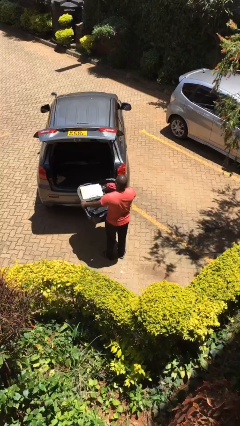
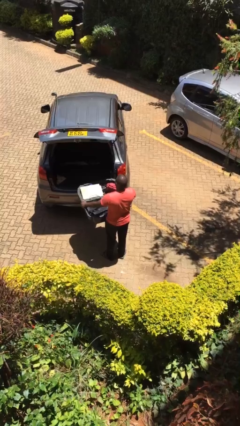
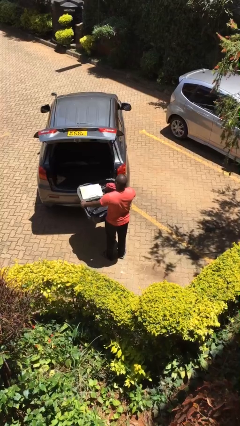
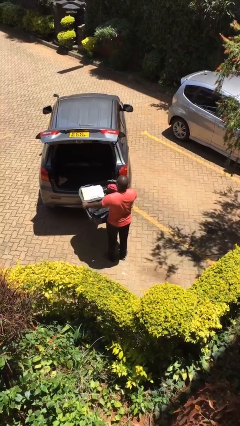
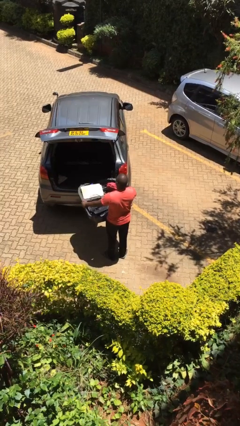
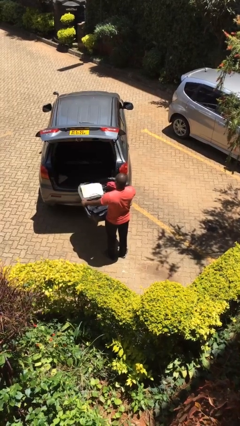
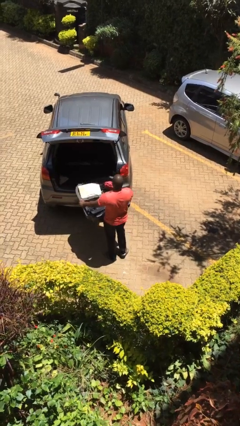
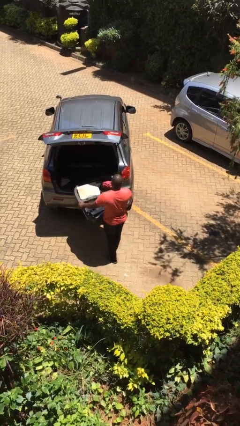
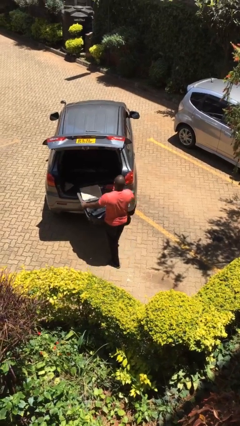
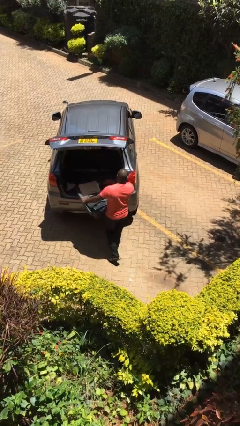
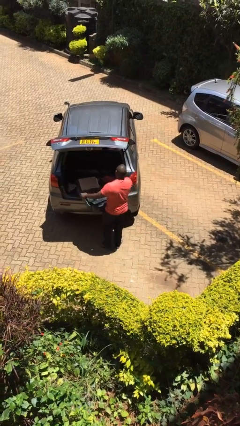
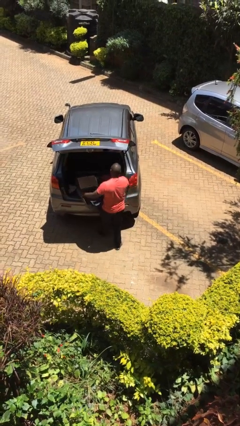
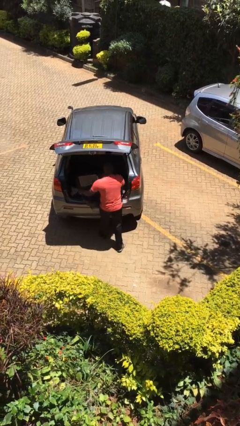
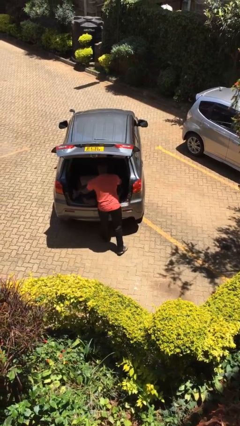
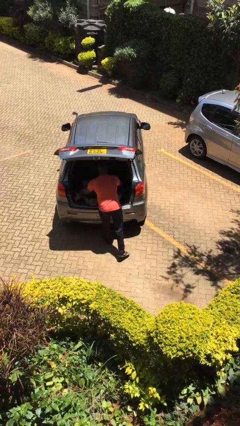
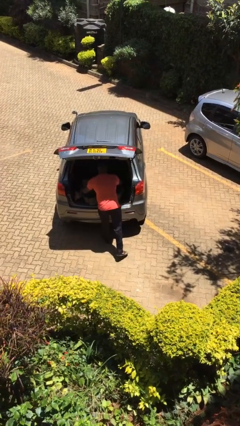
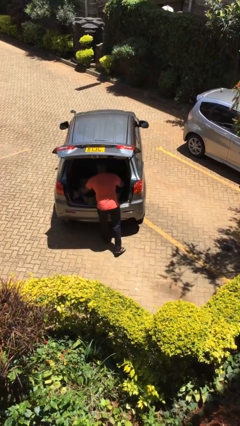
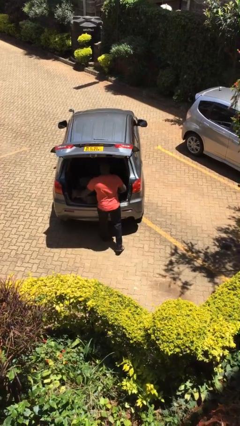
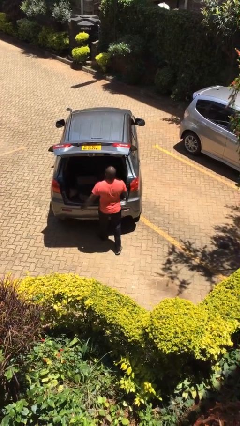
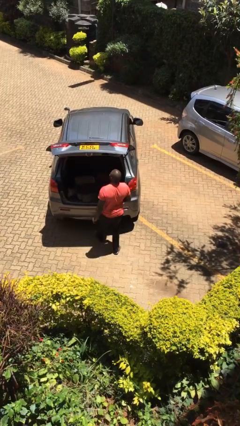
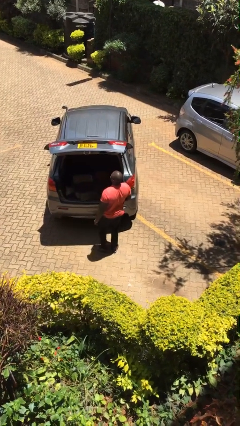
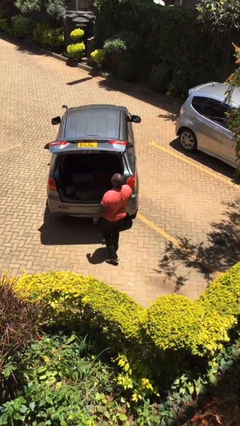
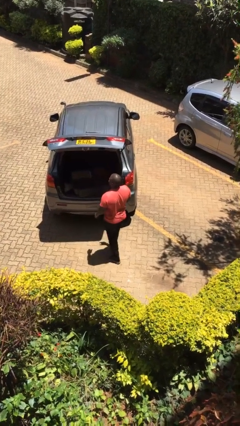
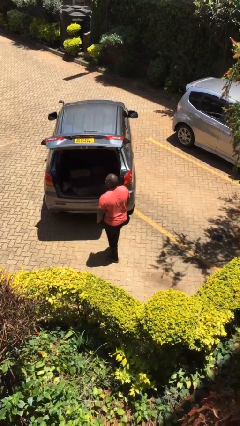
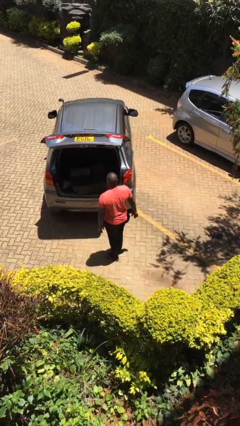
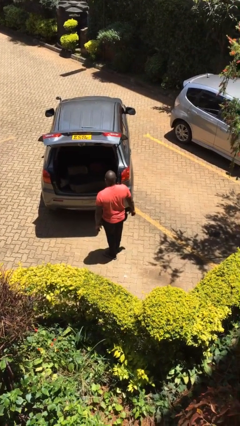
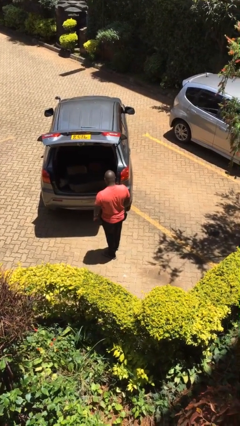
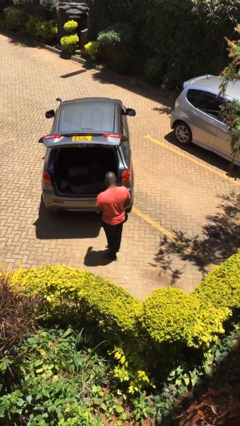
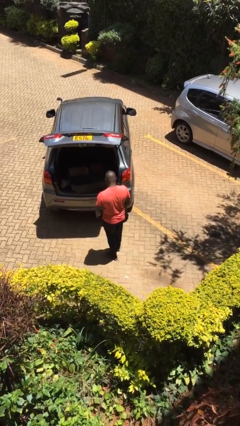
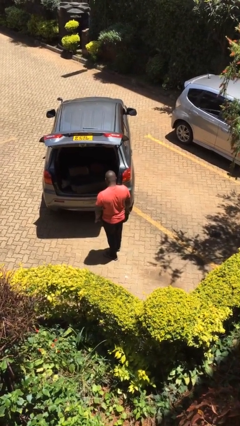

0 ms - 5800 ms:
person loads car

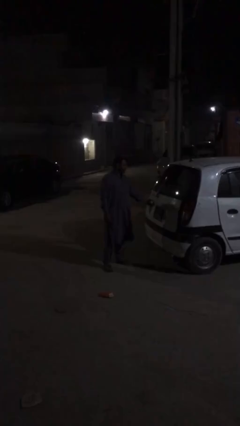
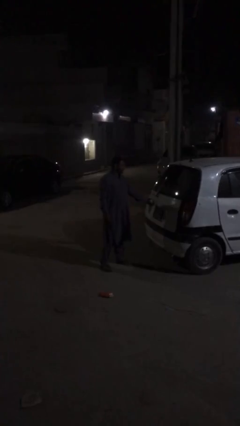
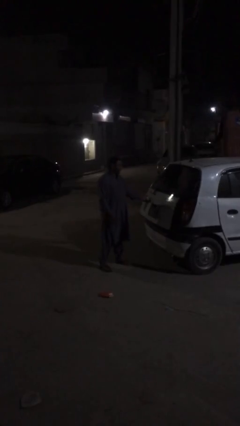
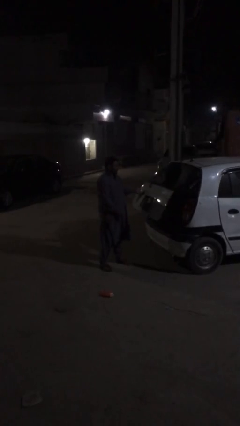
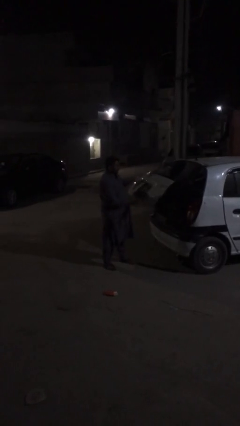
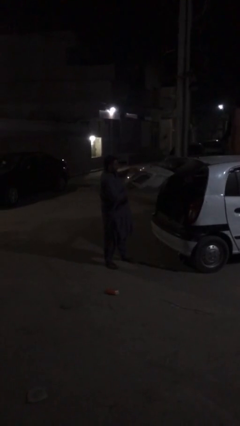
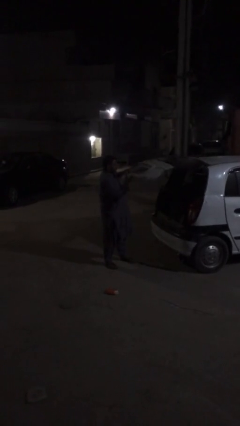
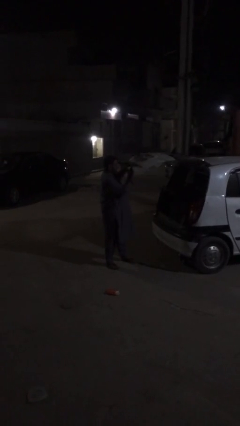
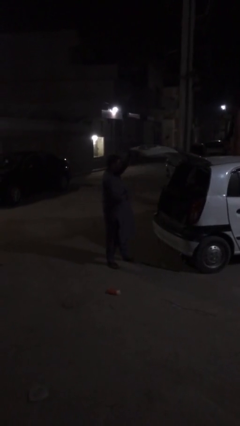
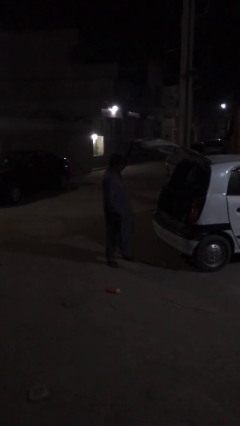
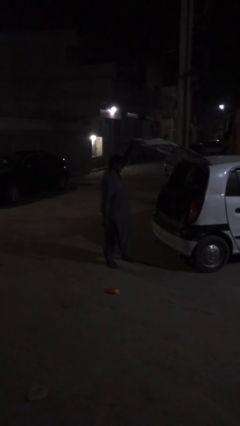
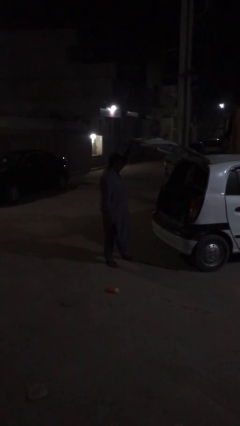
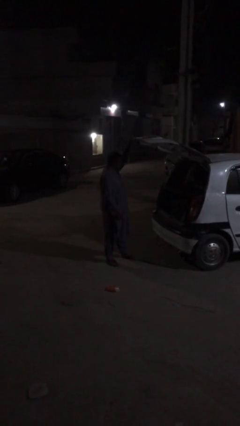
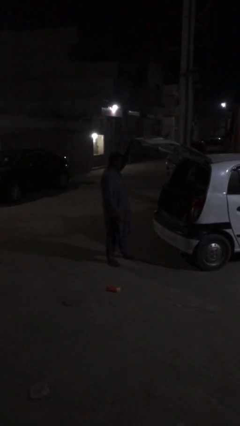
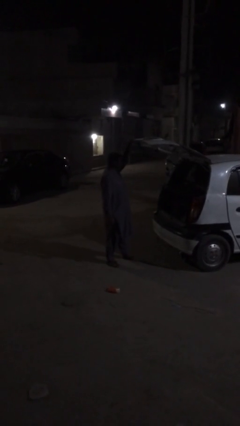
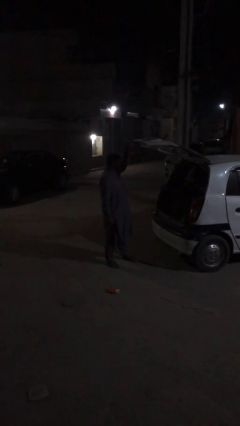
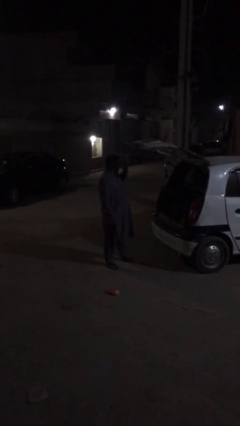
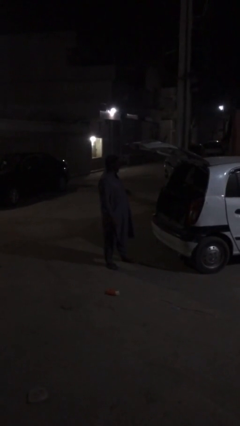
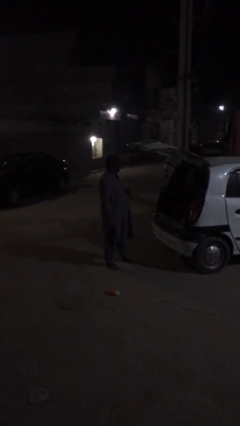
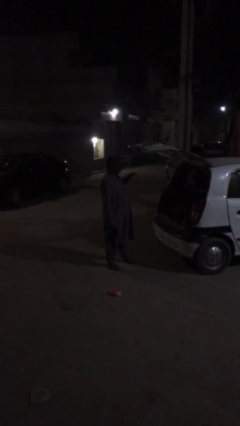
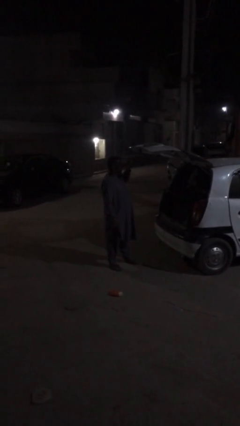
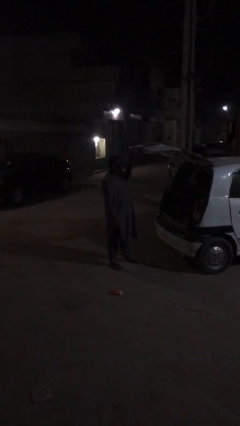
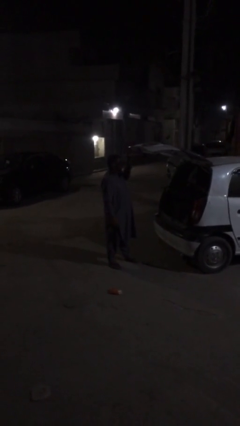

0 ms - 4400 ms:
person opens car trunk

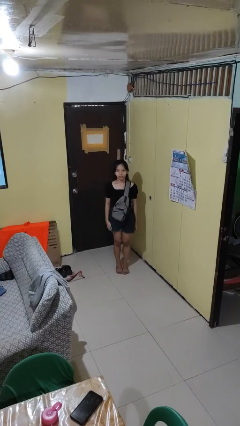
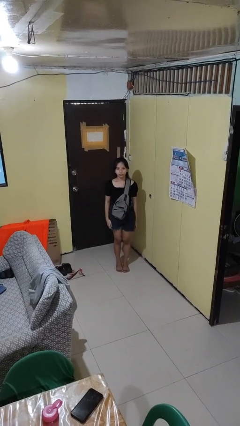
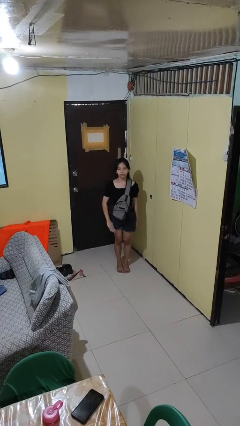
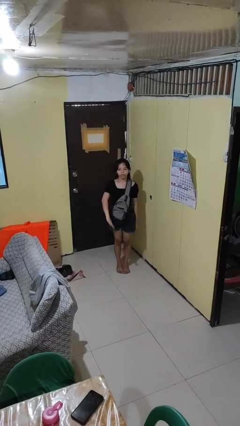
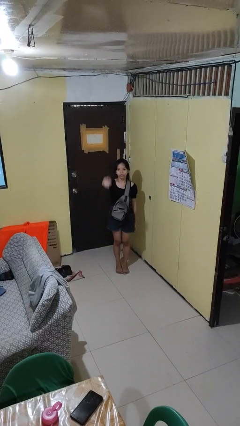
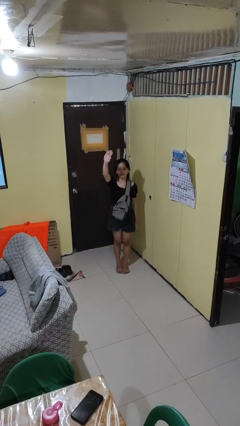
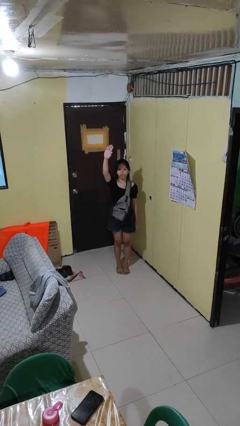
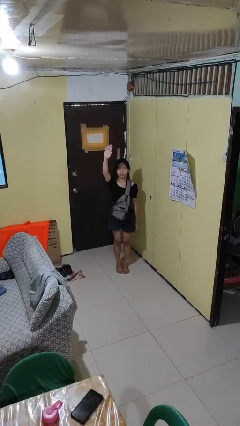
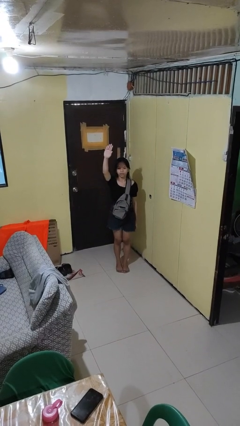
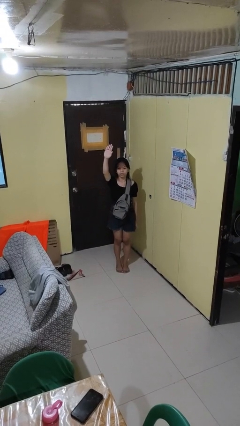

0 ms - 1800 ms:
person gestures swipe up

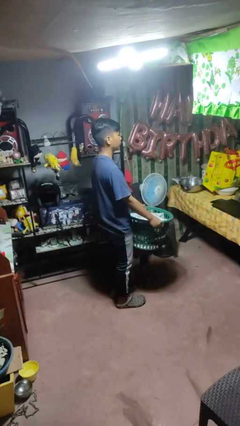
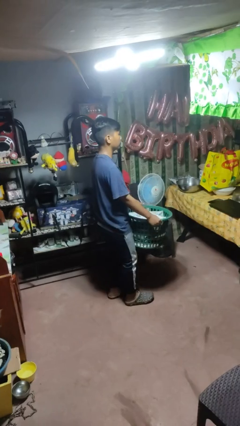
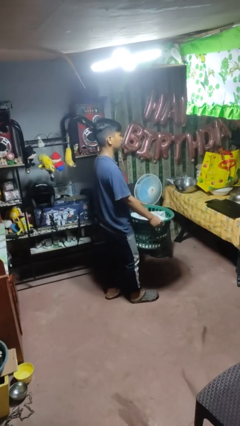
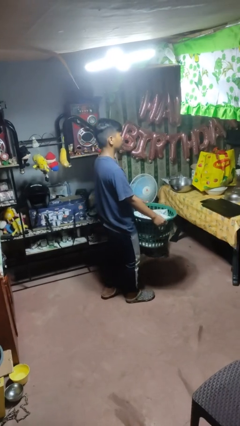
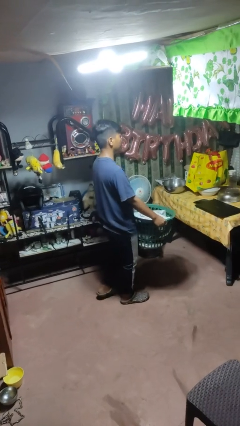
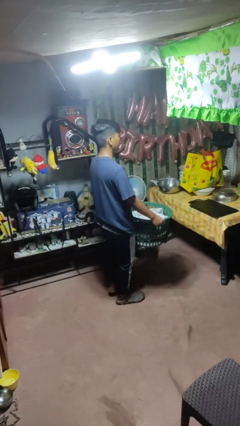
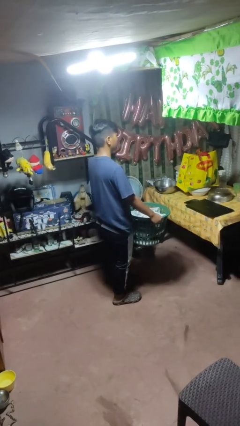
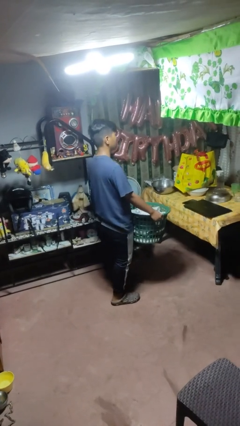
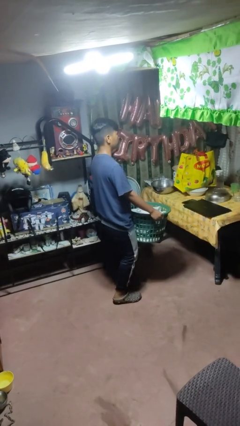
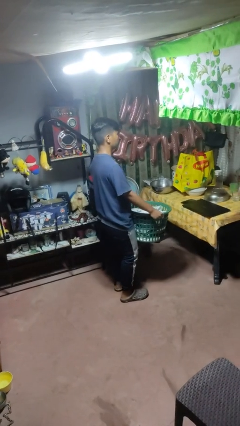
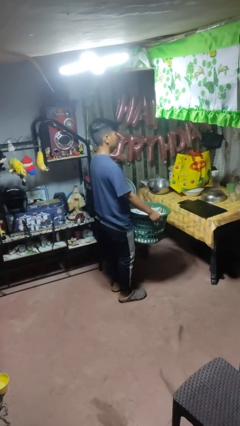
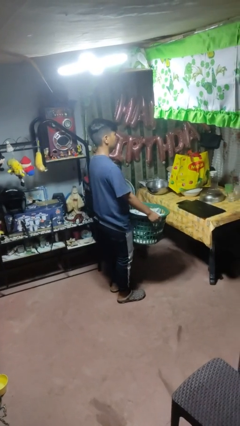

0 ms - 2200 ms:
person carries laundry basket

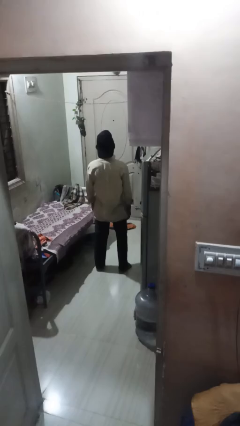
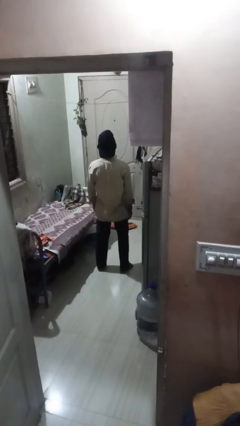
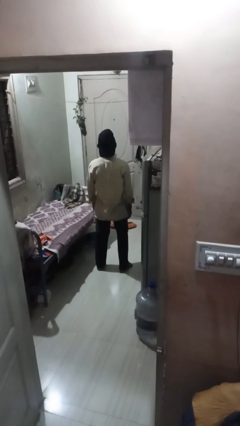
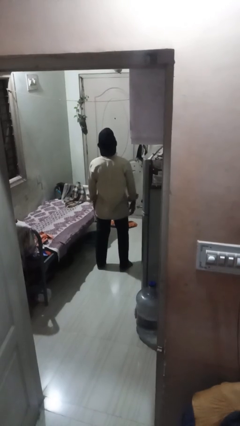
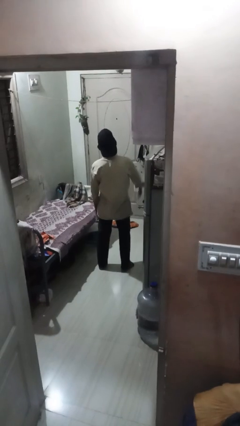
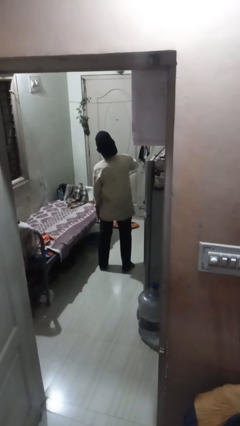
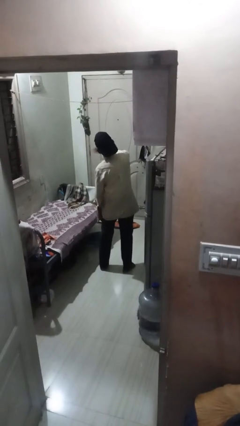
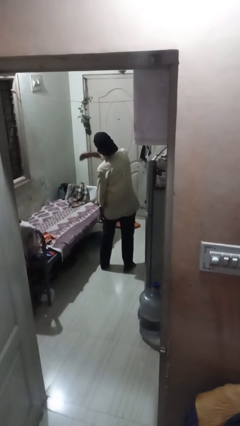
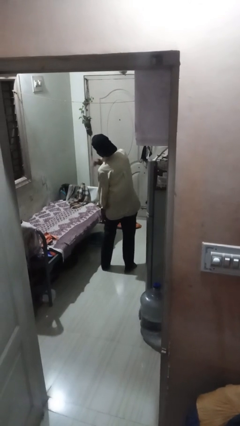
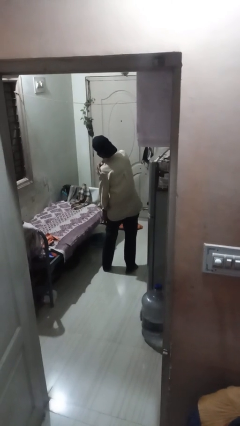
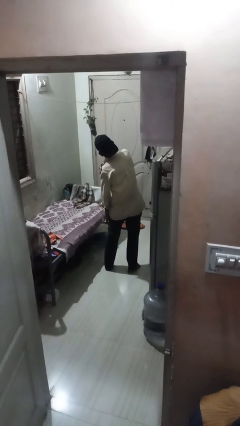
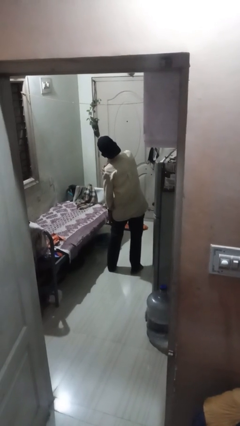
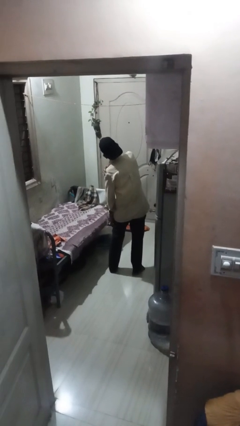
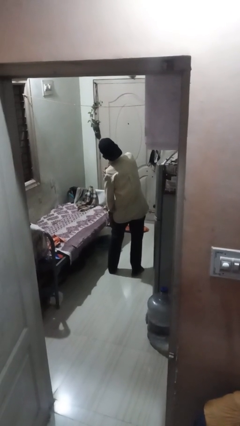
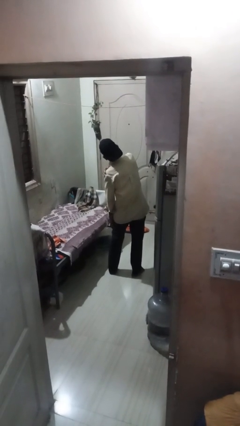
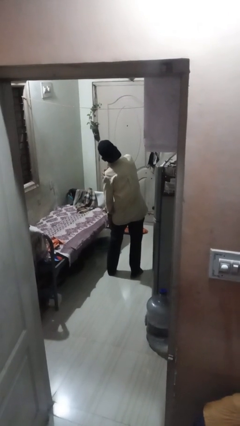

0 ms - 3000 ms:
person stretches arms to side
